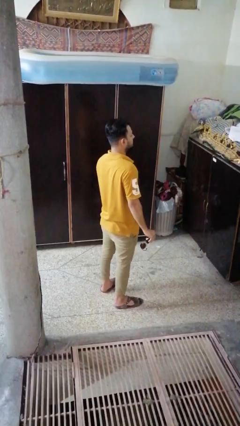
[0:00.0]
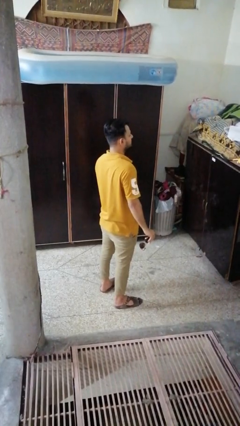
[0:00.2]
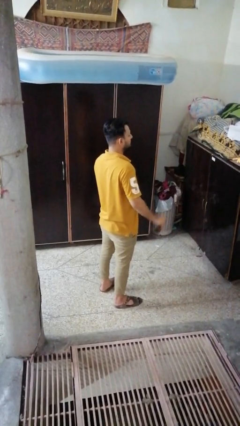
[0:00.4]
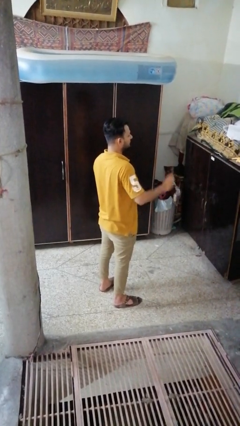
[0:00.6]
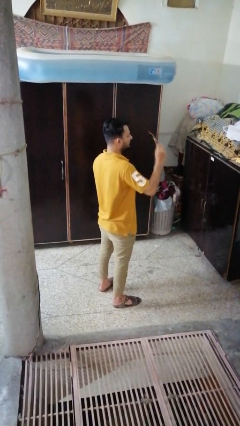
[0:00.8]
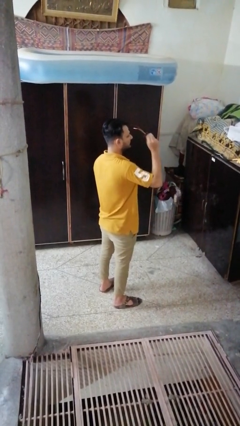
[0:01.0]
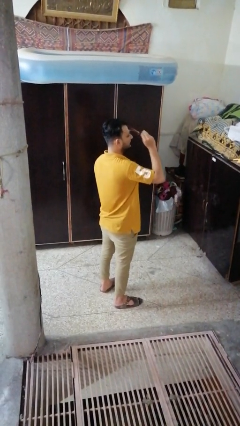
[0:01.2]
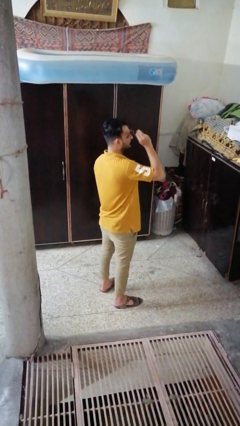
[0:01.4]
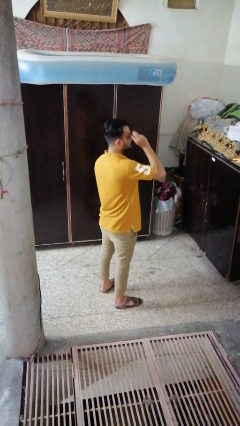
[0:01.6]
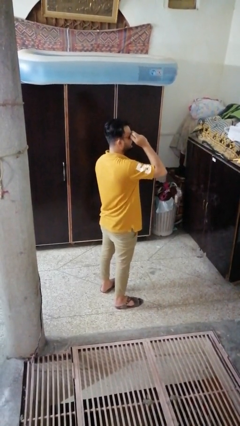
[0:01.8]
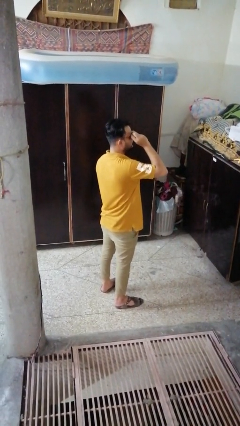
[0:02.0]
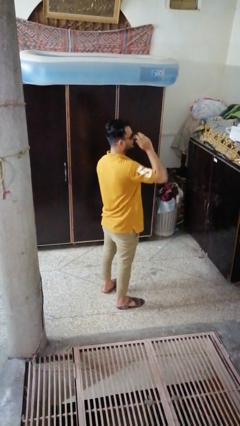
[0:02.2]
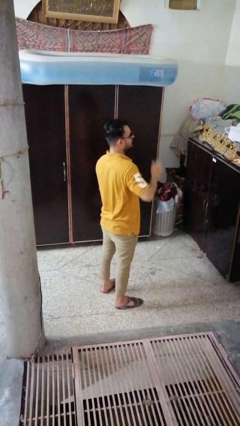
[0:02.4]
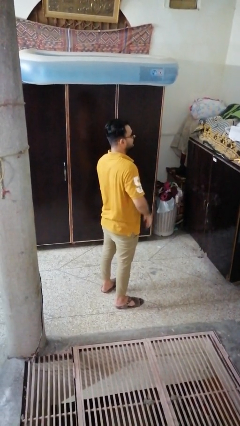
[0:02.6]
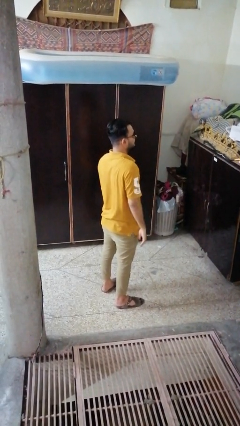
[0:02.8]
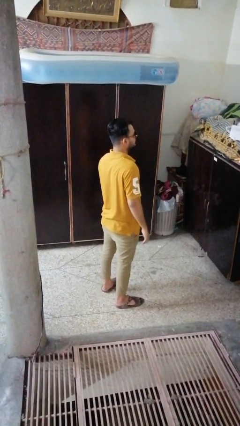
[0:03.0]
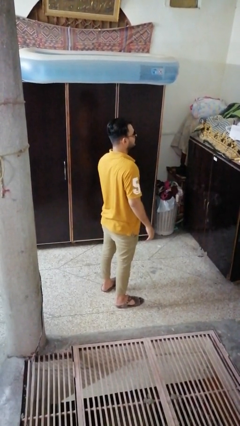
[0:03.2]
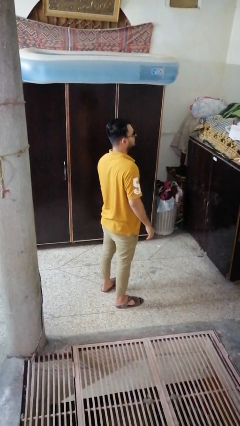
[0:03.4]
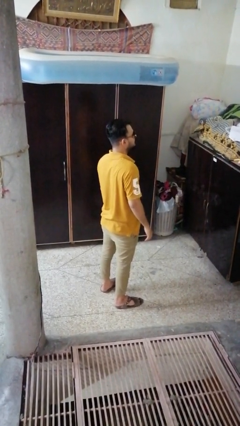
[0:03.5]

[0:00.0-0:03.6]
person puts on sunglasses

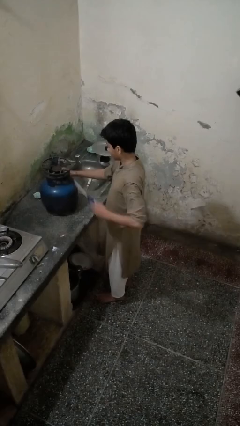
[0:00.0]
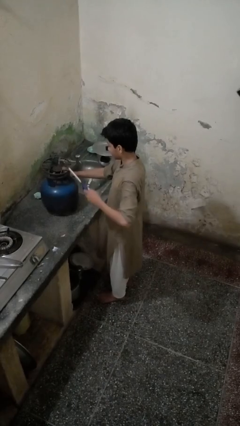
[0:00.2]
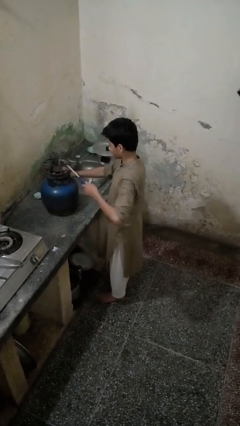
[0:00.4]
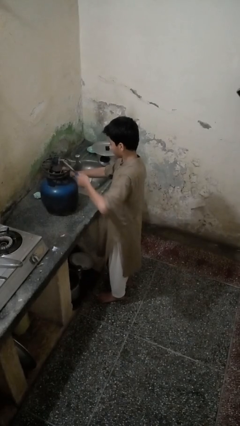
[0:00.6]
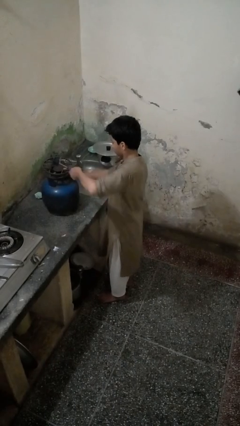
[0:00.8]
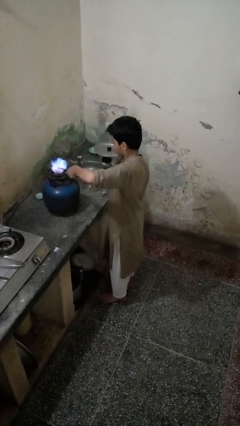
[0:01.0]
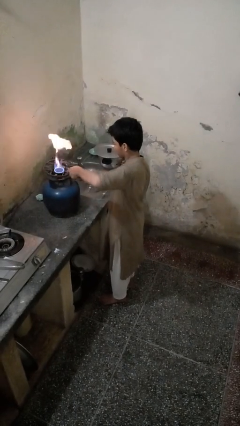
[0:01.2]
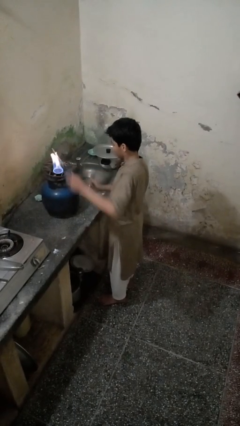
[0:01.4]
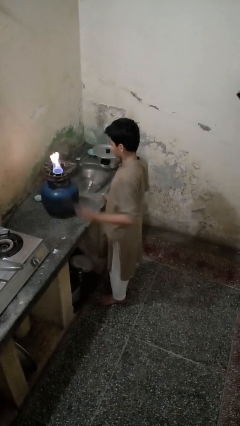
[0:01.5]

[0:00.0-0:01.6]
person turns on stovetop

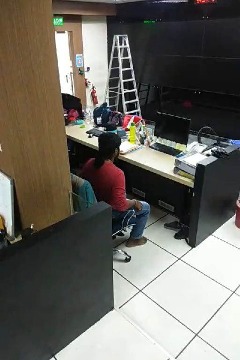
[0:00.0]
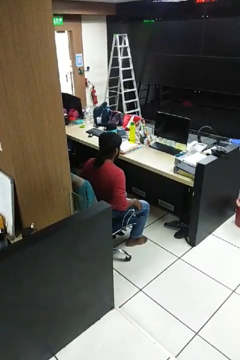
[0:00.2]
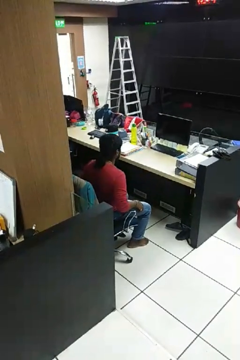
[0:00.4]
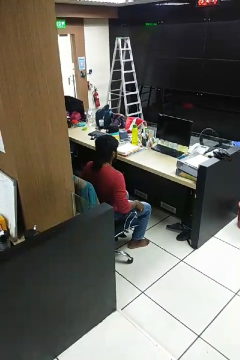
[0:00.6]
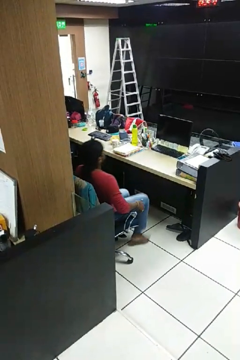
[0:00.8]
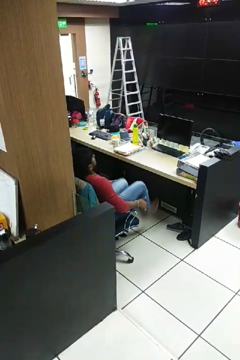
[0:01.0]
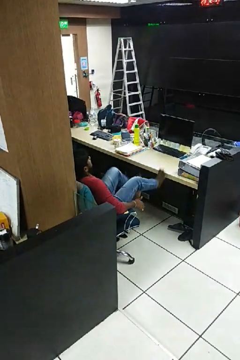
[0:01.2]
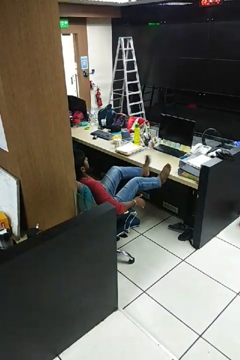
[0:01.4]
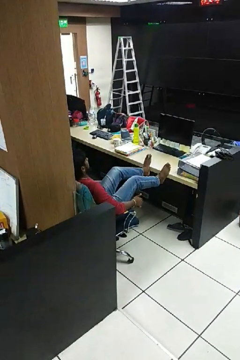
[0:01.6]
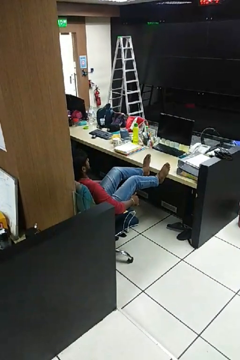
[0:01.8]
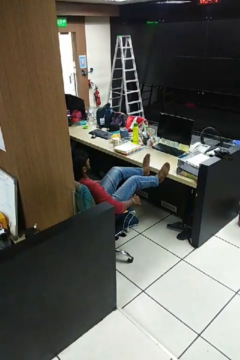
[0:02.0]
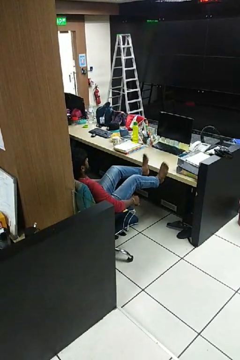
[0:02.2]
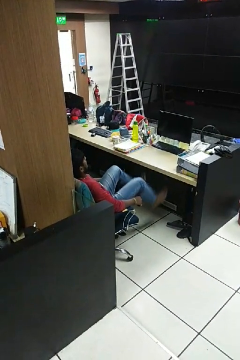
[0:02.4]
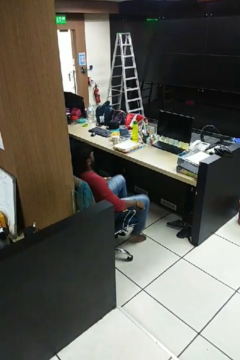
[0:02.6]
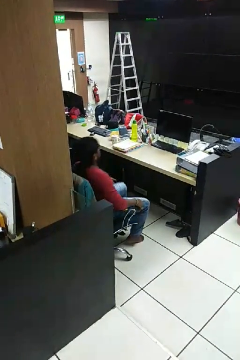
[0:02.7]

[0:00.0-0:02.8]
person puts feet up

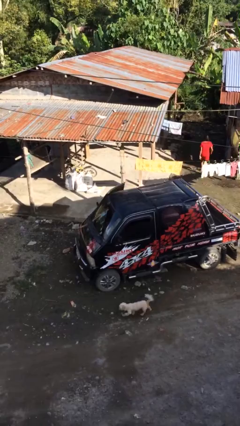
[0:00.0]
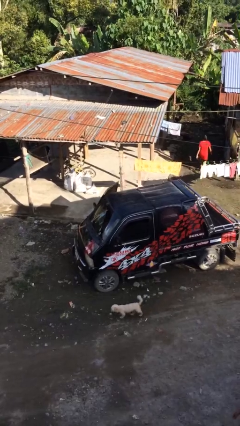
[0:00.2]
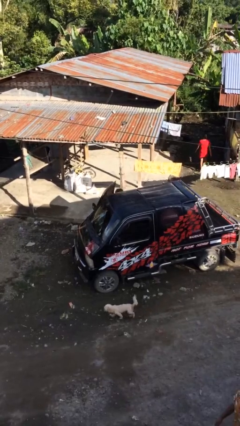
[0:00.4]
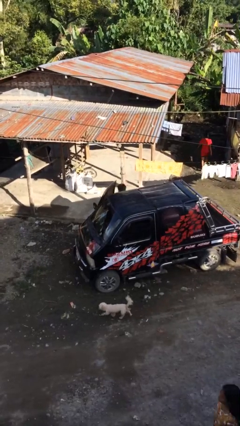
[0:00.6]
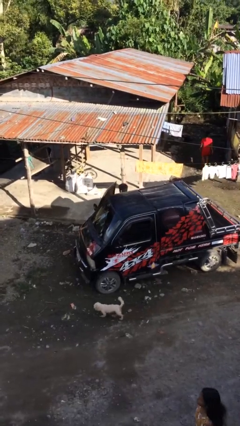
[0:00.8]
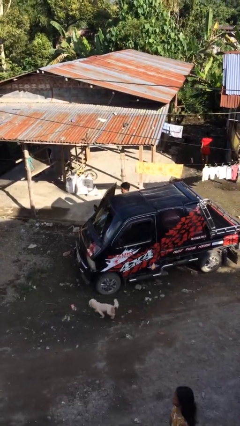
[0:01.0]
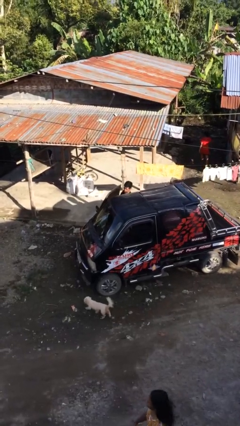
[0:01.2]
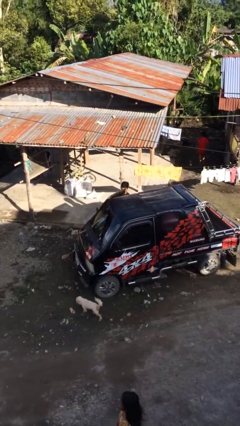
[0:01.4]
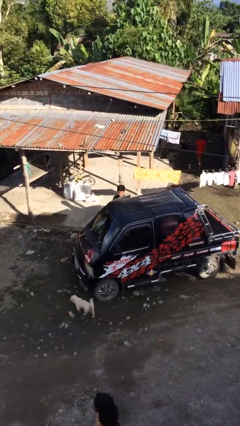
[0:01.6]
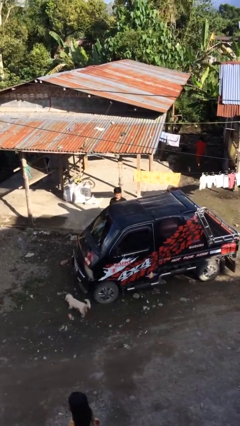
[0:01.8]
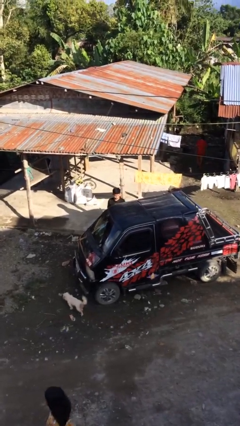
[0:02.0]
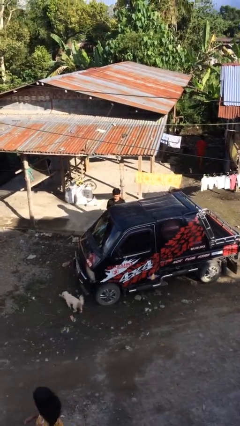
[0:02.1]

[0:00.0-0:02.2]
person exits car

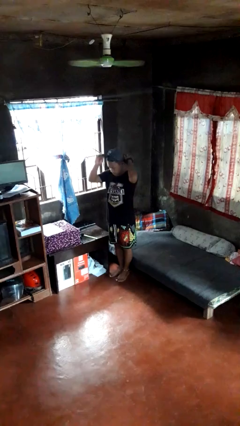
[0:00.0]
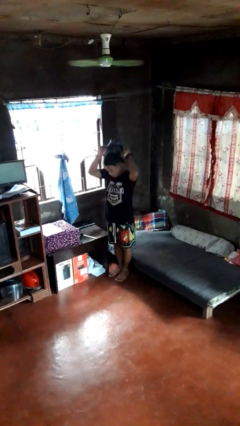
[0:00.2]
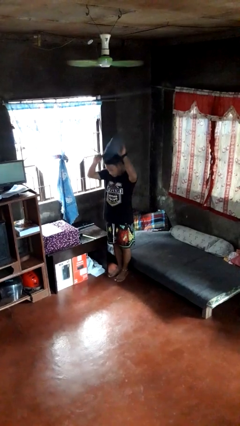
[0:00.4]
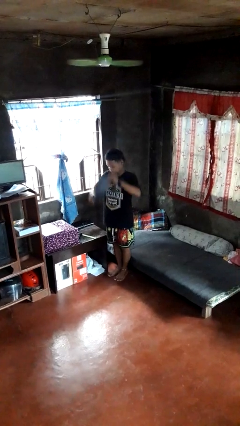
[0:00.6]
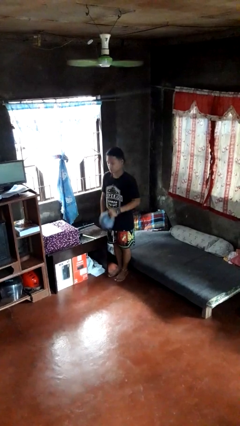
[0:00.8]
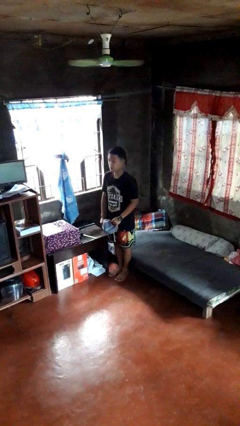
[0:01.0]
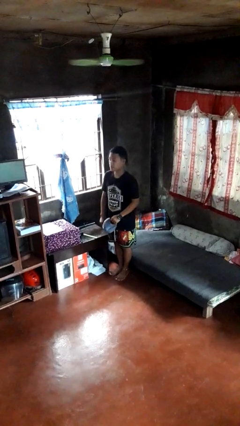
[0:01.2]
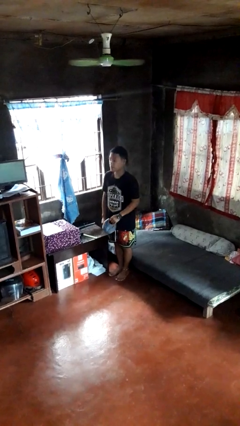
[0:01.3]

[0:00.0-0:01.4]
person takes off hat

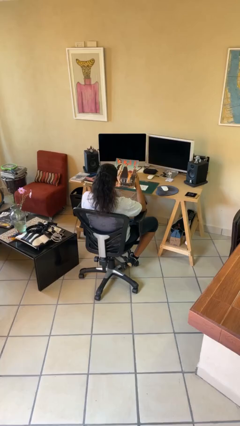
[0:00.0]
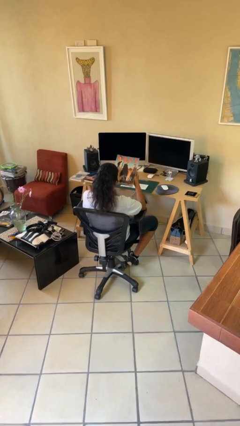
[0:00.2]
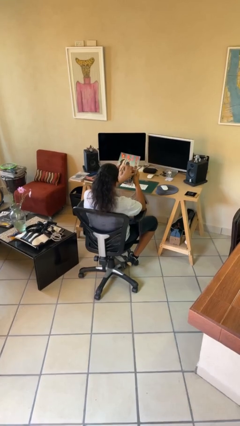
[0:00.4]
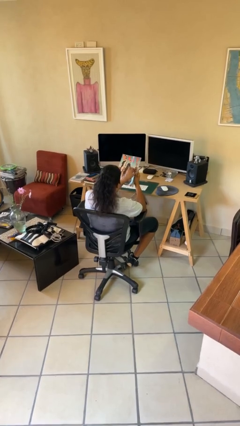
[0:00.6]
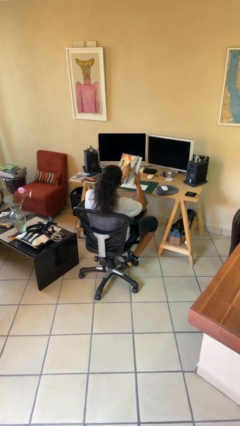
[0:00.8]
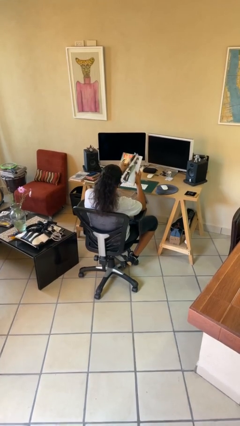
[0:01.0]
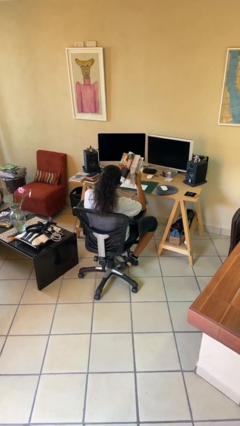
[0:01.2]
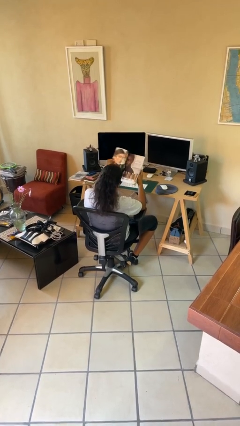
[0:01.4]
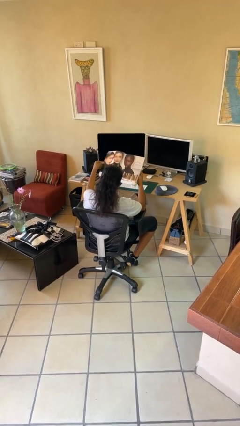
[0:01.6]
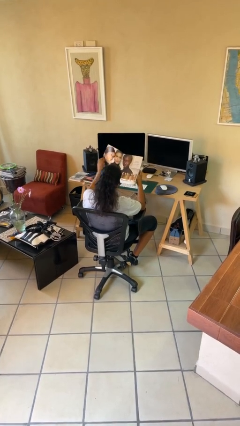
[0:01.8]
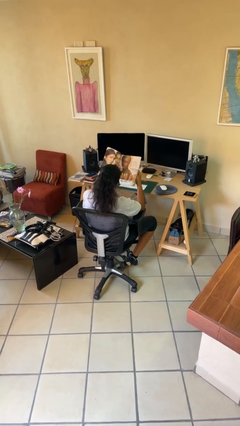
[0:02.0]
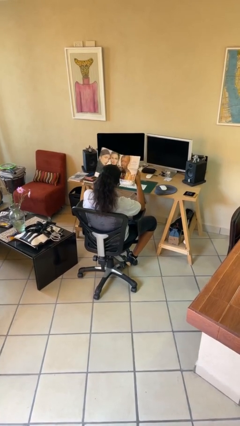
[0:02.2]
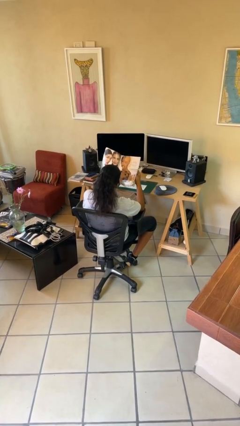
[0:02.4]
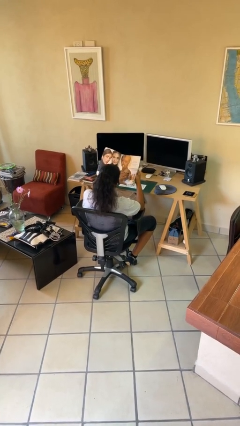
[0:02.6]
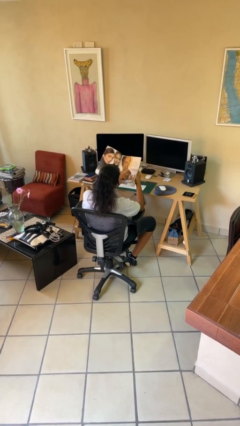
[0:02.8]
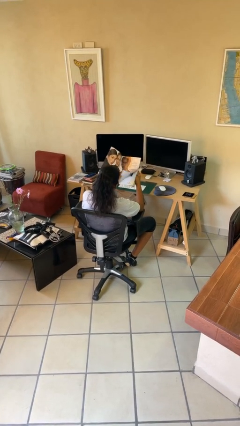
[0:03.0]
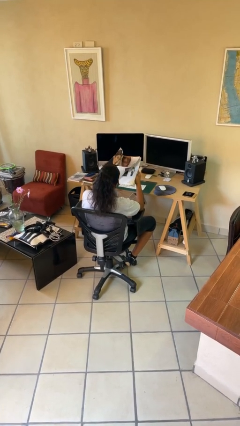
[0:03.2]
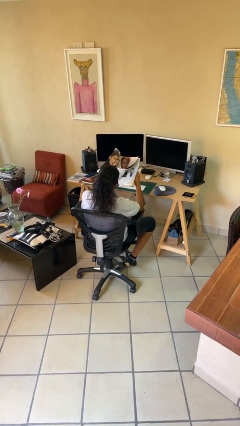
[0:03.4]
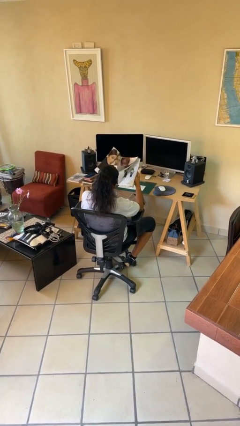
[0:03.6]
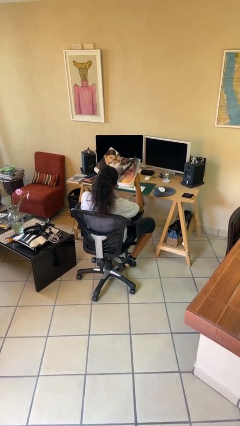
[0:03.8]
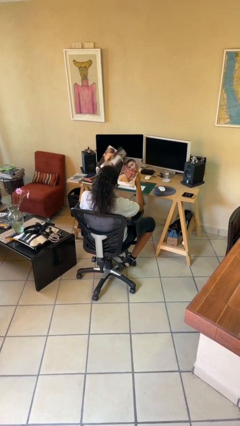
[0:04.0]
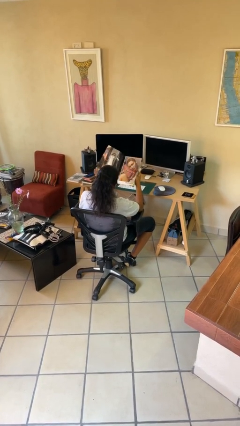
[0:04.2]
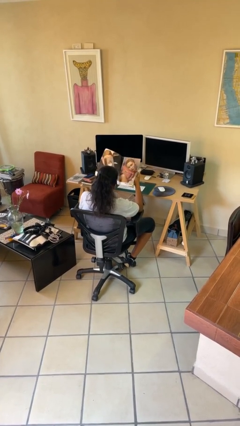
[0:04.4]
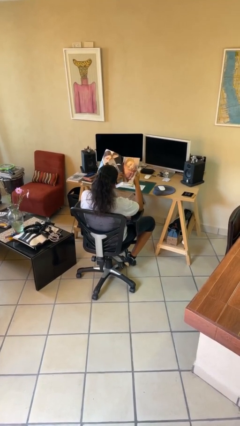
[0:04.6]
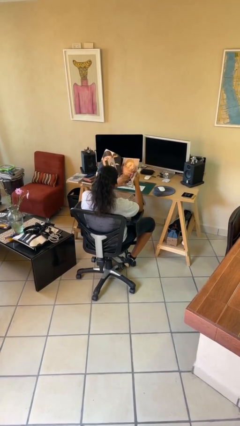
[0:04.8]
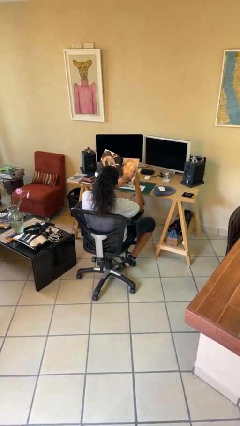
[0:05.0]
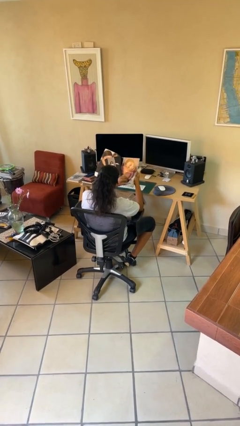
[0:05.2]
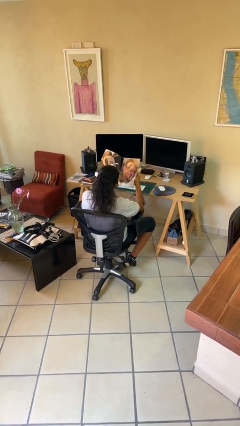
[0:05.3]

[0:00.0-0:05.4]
person reads magazine

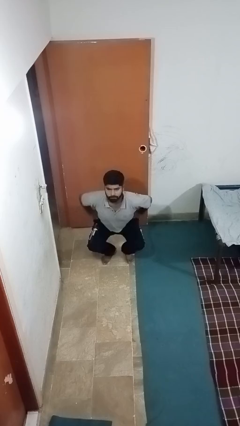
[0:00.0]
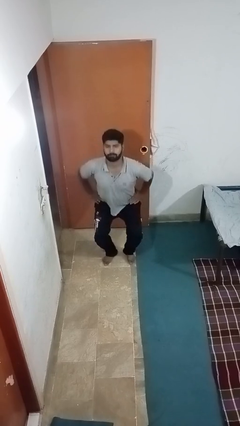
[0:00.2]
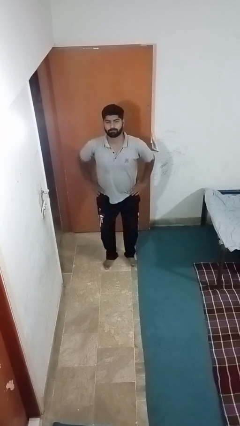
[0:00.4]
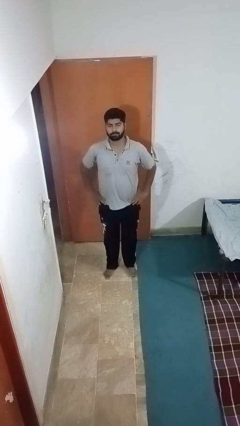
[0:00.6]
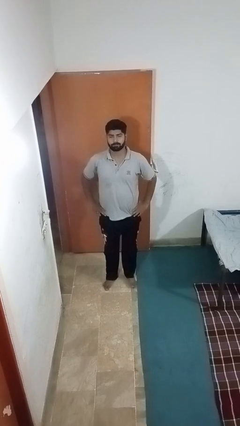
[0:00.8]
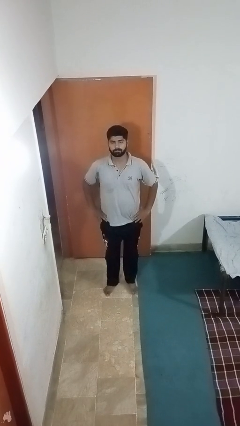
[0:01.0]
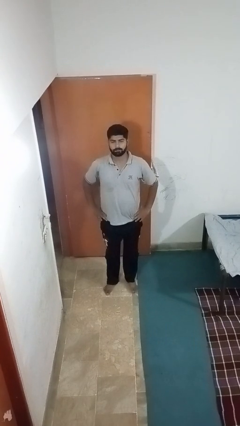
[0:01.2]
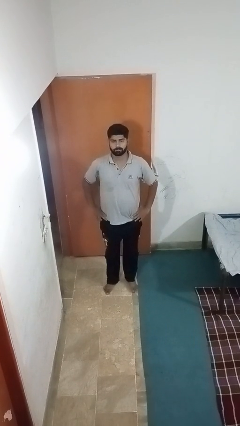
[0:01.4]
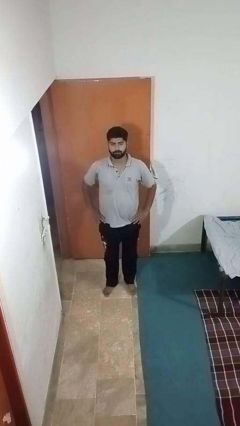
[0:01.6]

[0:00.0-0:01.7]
person stands up
